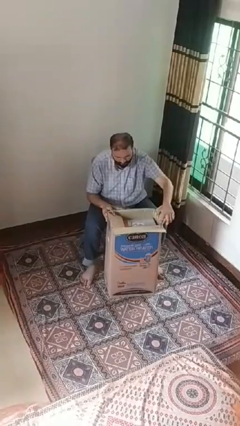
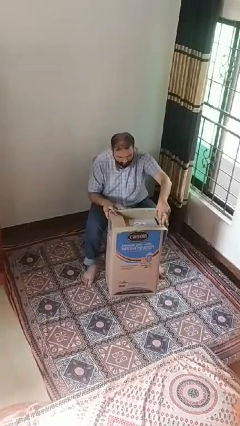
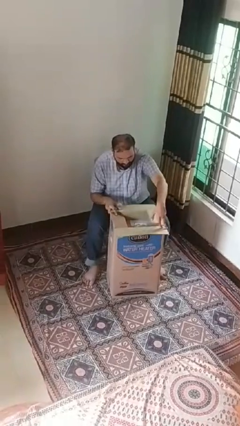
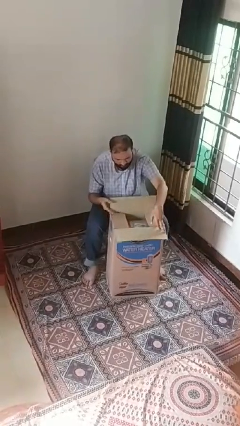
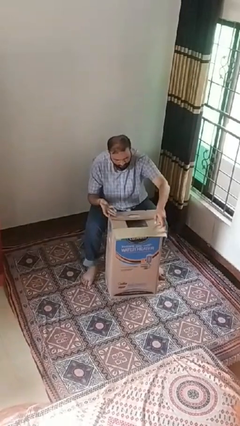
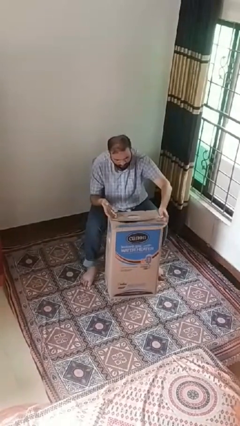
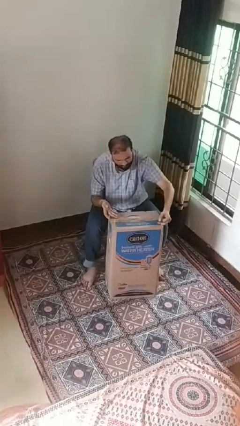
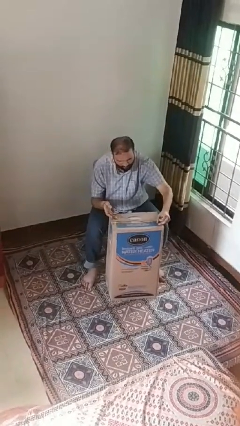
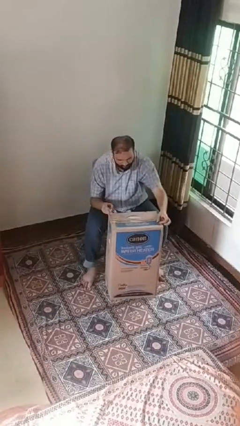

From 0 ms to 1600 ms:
person closes box

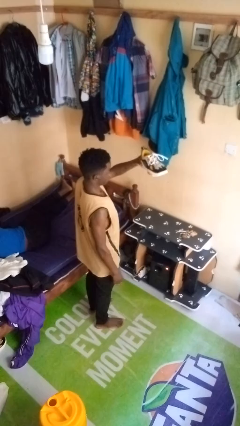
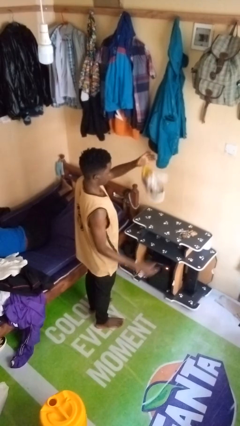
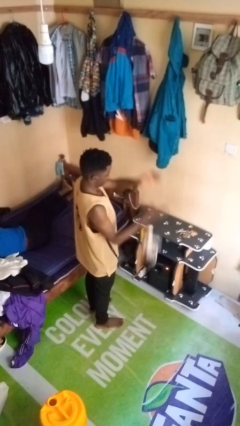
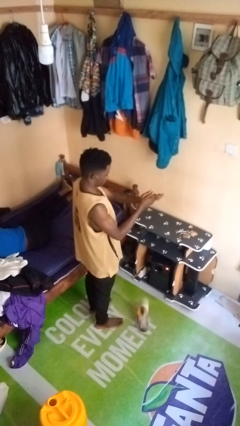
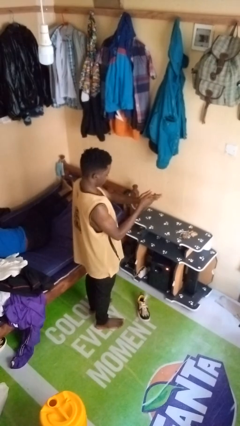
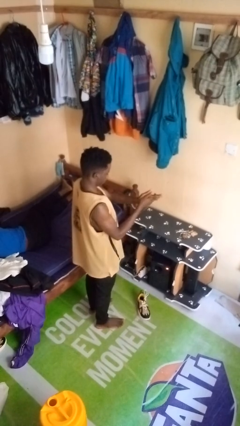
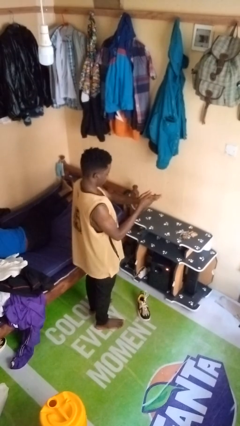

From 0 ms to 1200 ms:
person drops object

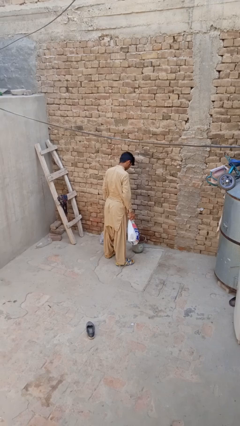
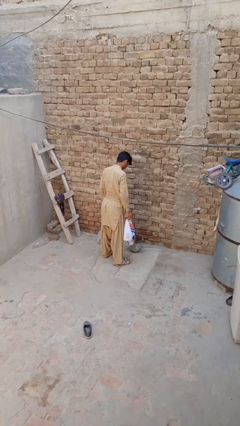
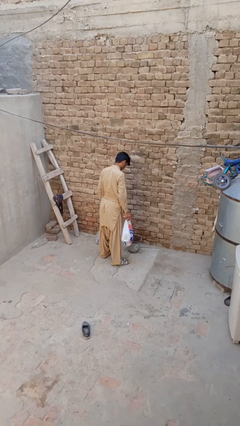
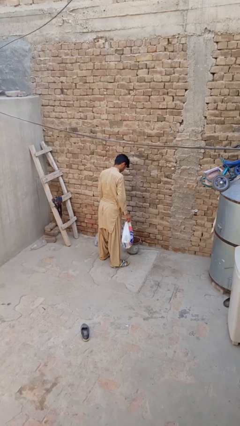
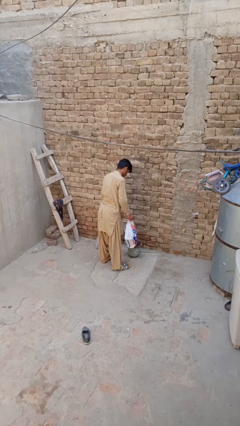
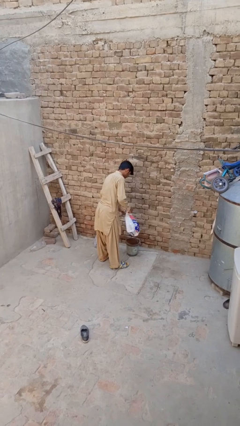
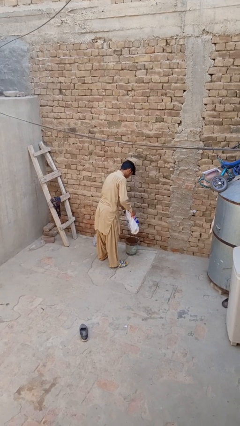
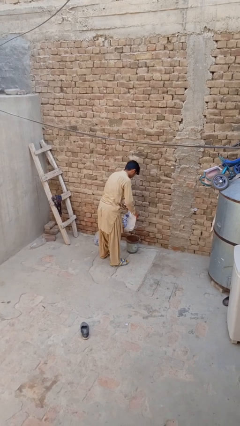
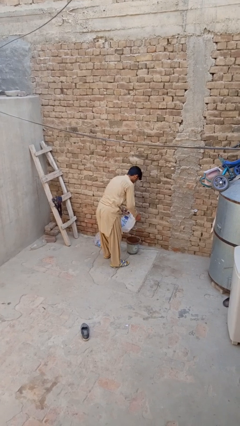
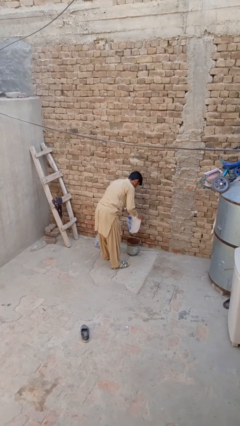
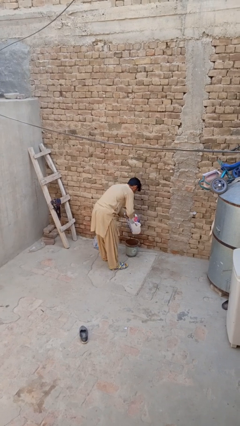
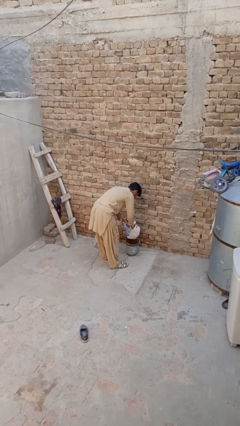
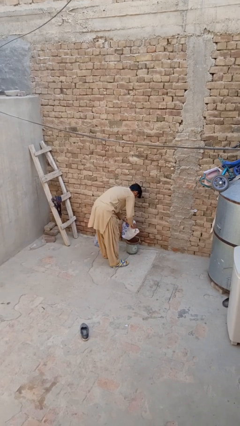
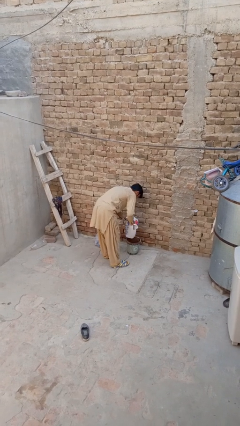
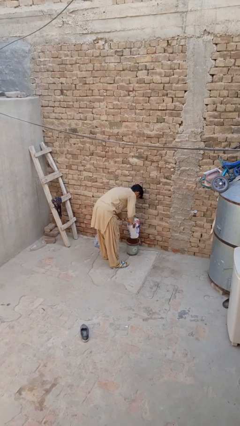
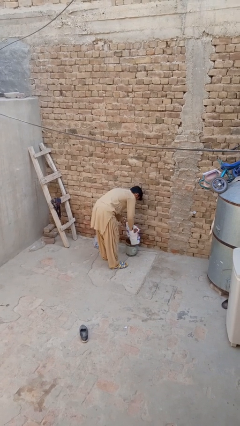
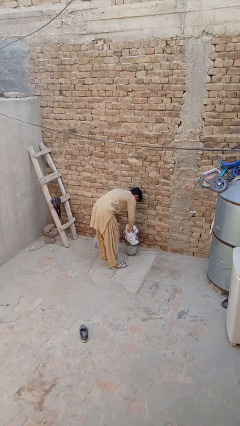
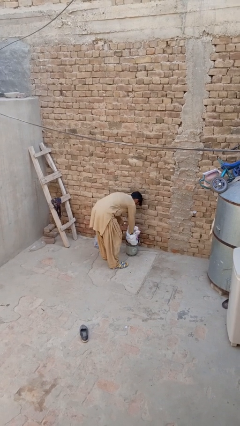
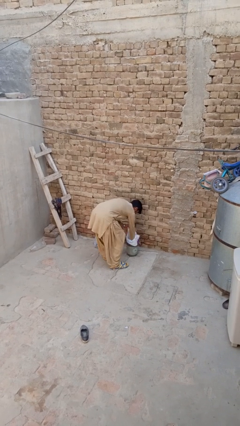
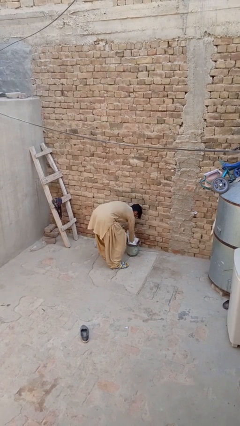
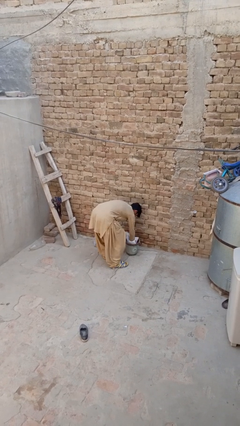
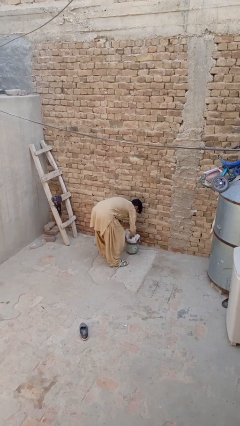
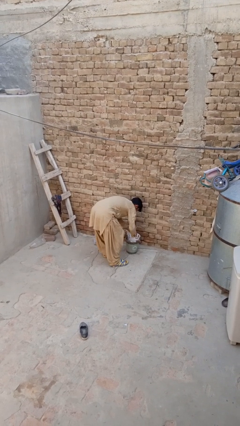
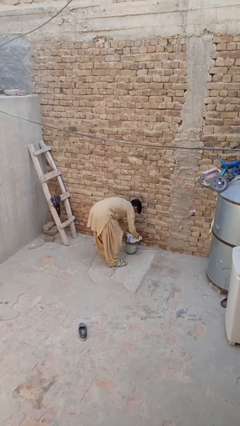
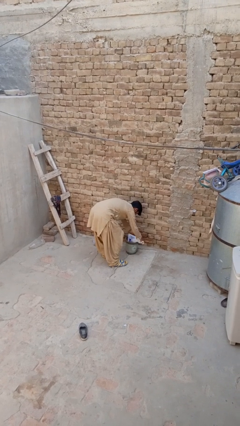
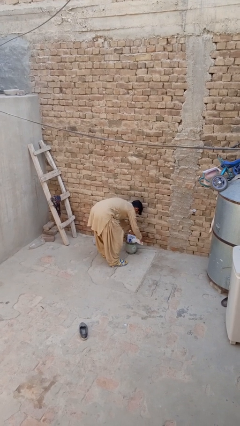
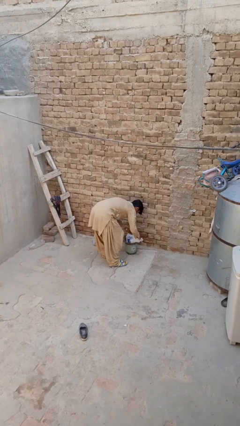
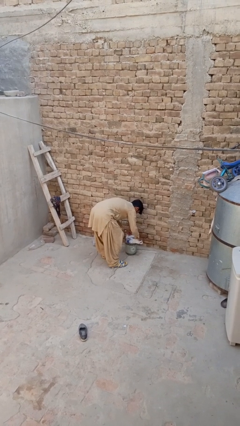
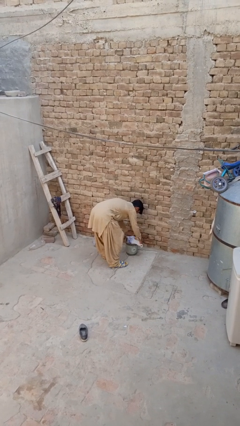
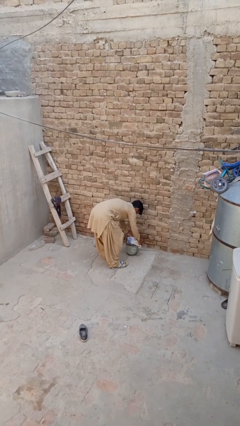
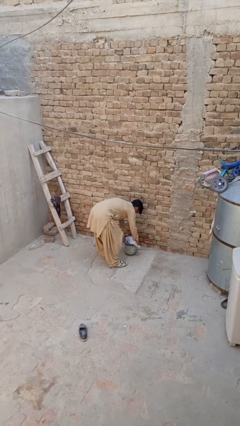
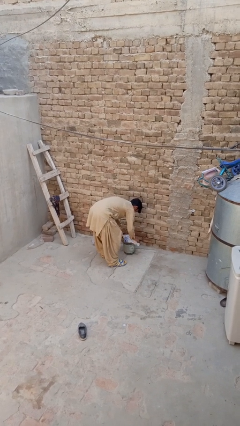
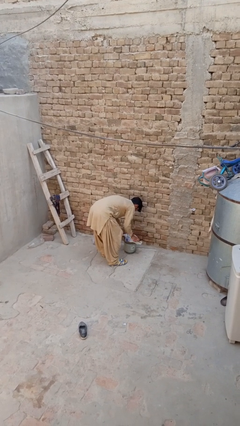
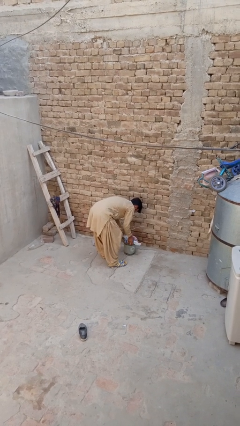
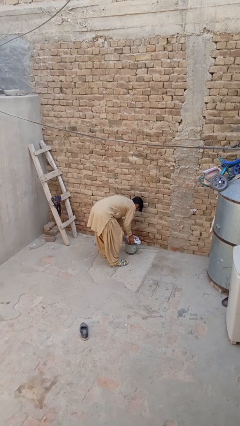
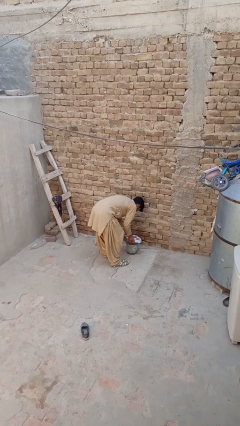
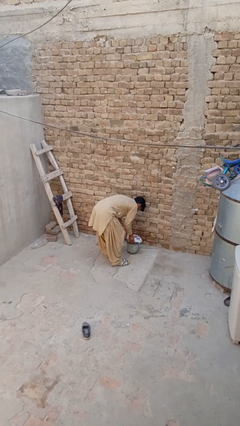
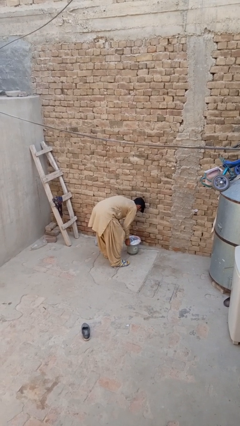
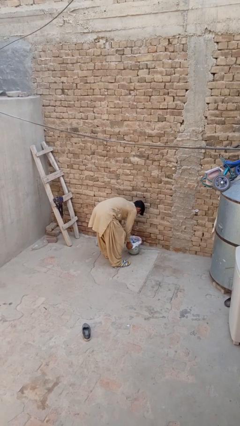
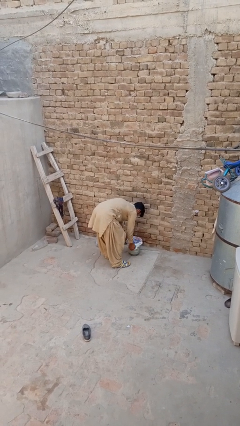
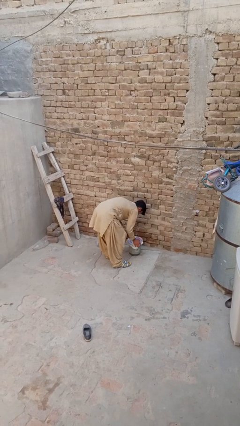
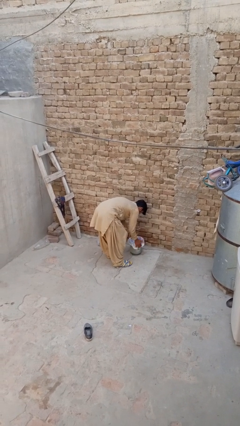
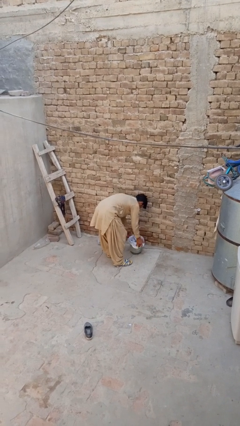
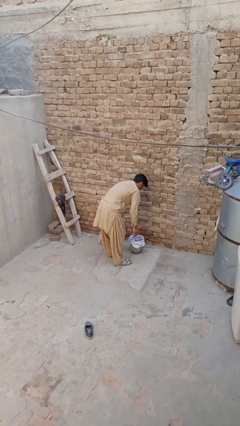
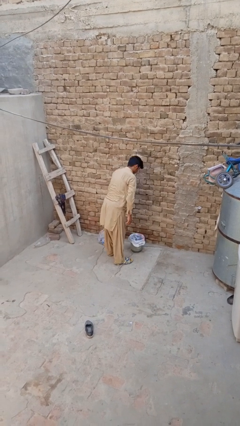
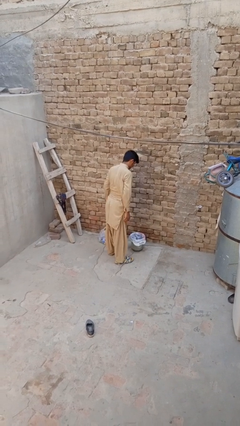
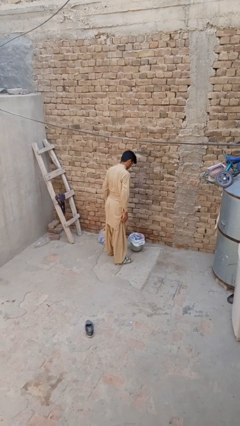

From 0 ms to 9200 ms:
person inserts trashbag into trashcan

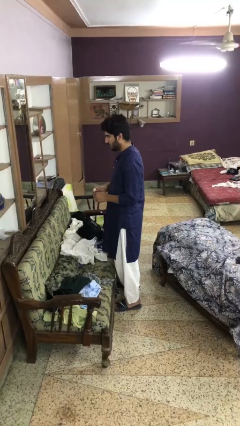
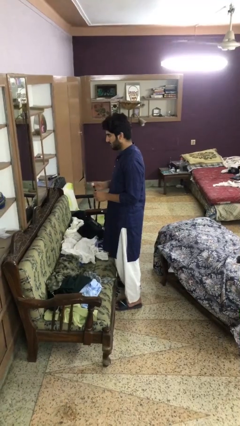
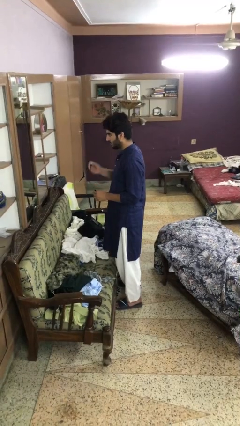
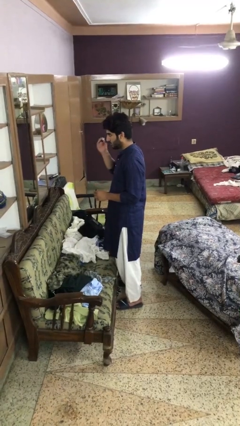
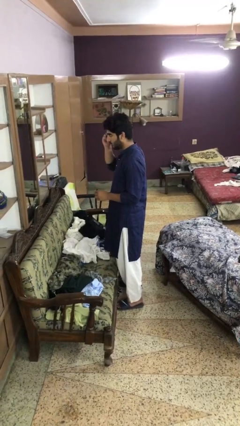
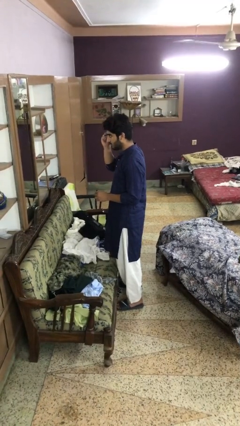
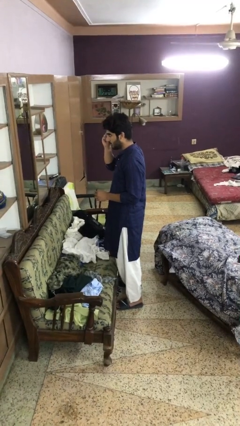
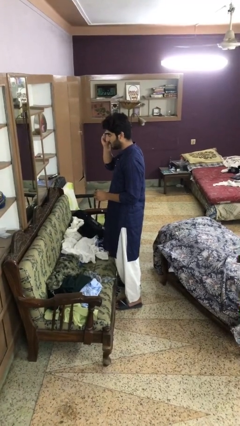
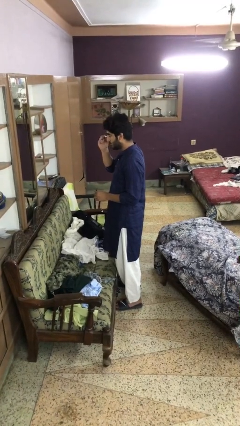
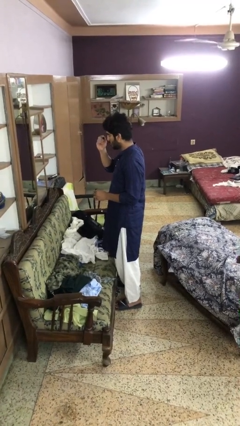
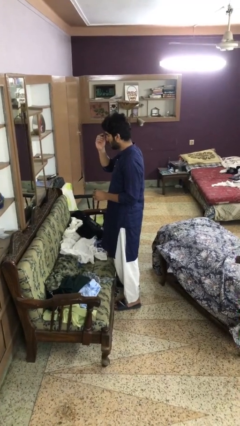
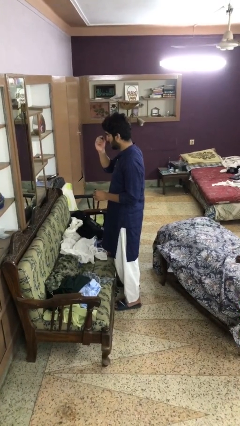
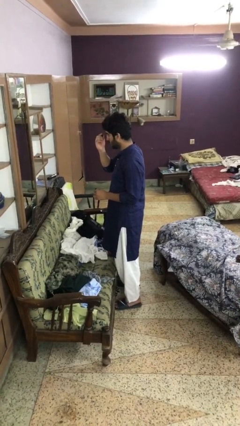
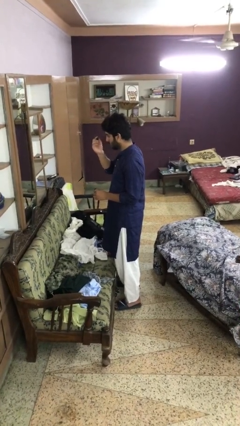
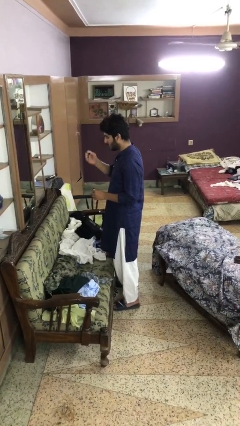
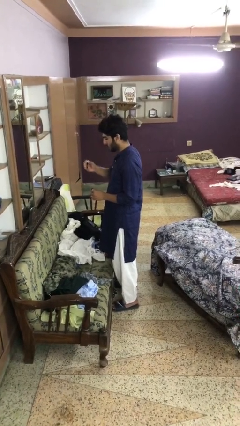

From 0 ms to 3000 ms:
person applies eye makeup

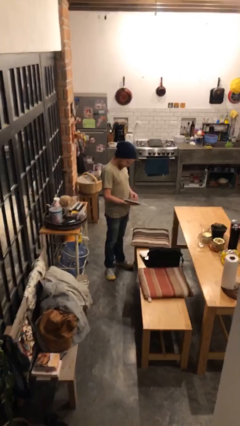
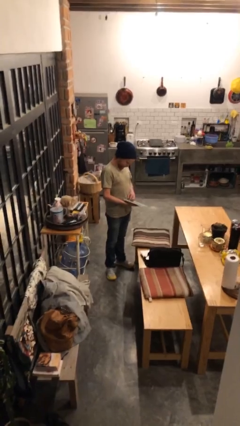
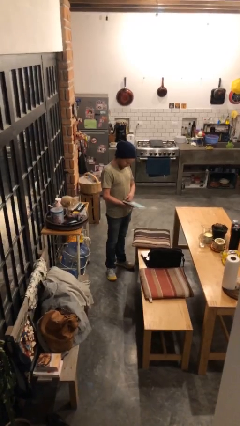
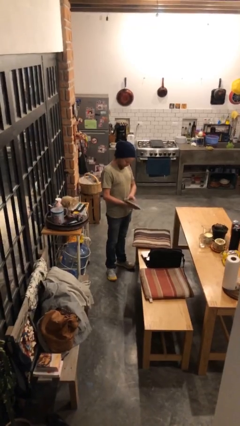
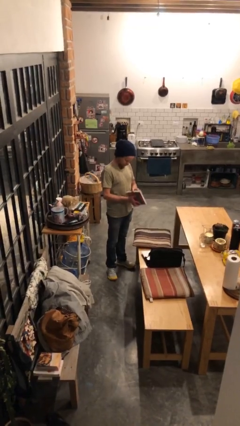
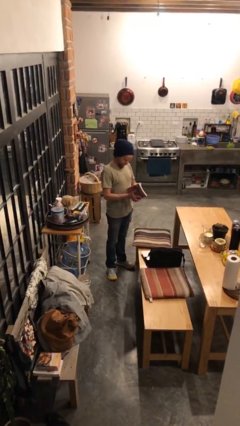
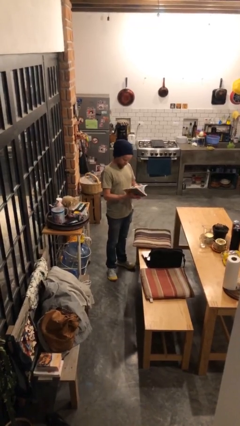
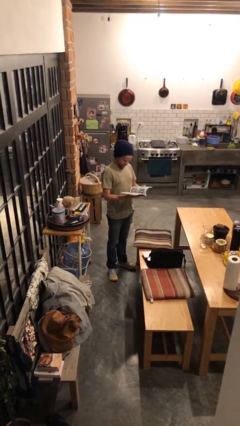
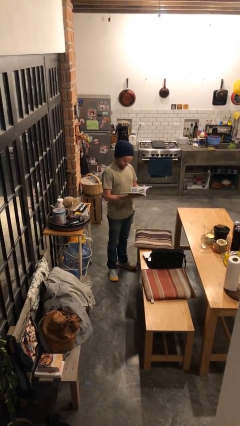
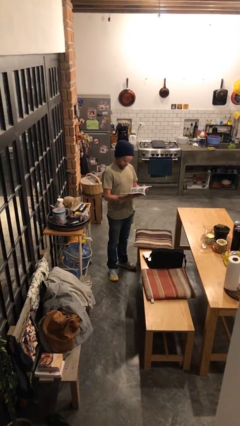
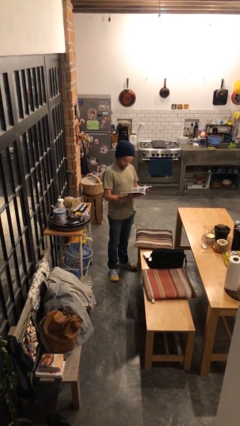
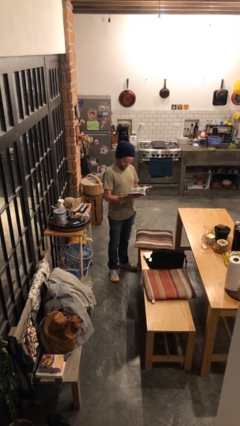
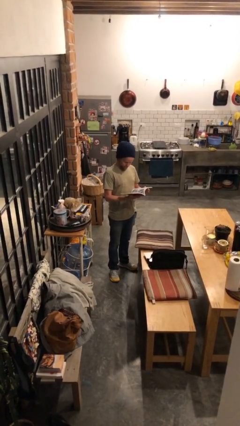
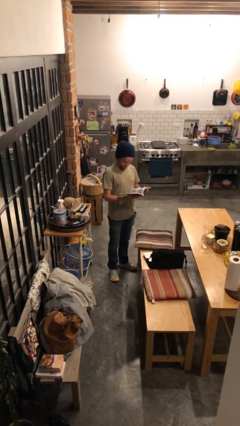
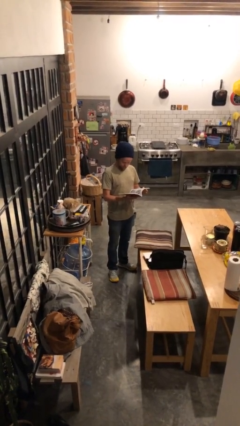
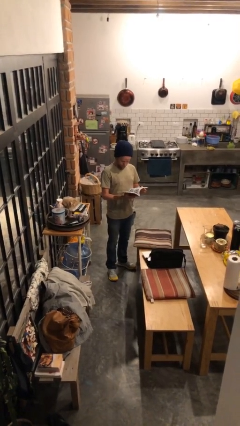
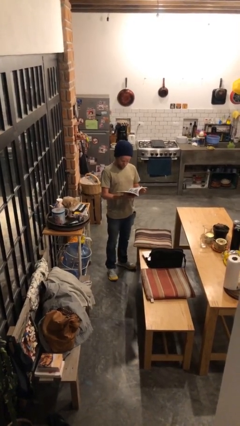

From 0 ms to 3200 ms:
person reads document
